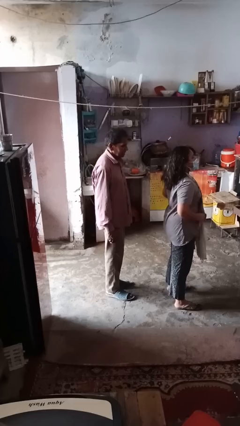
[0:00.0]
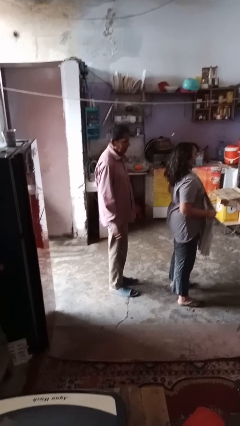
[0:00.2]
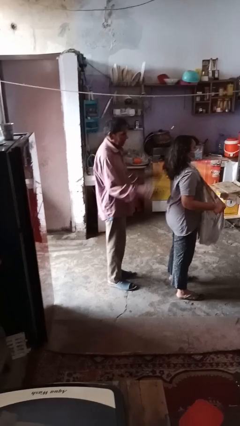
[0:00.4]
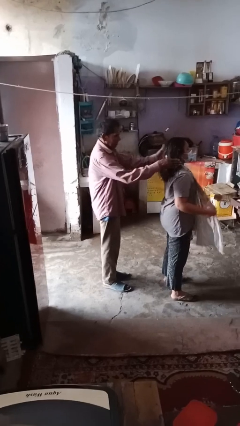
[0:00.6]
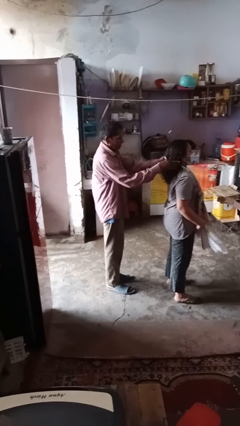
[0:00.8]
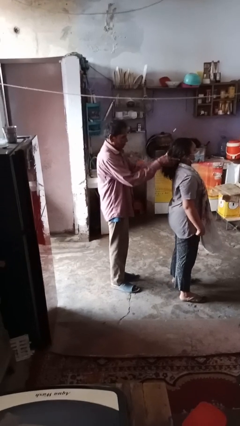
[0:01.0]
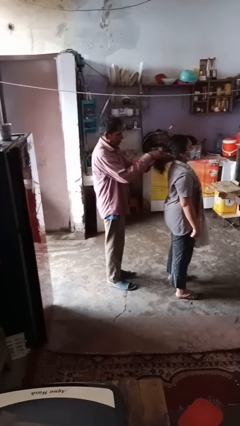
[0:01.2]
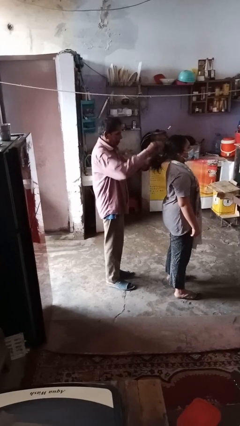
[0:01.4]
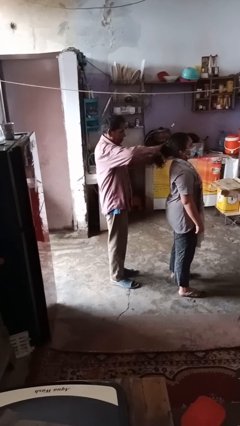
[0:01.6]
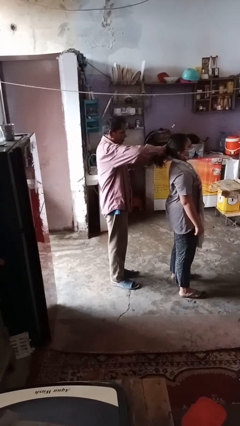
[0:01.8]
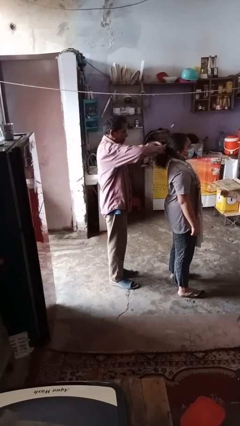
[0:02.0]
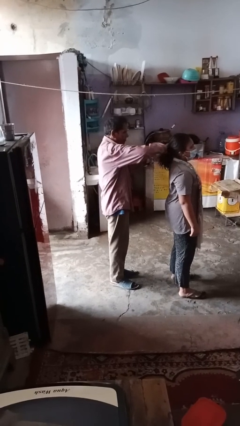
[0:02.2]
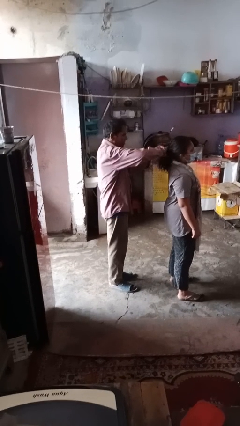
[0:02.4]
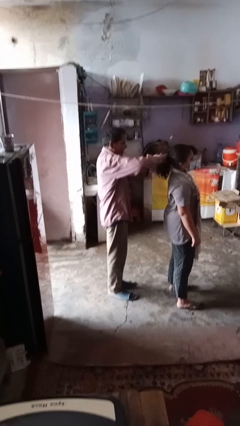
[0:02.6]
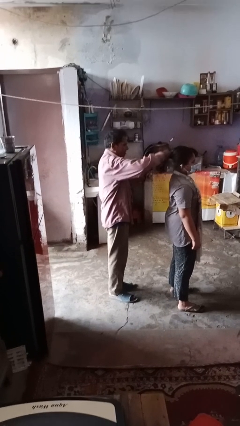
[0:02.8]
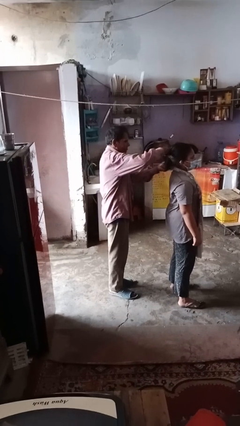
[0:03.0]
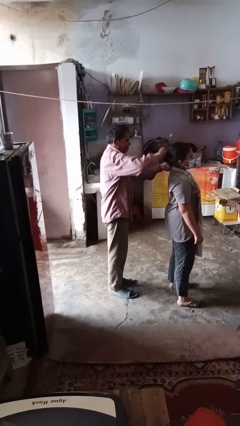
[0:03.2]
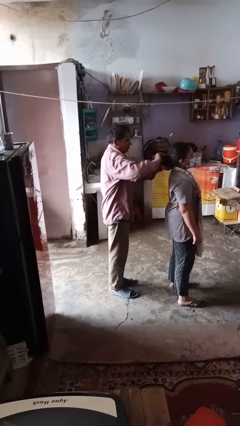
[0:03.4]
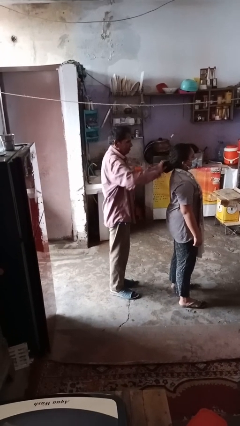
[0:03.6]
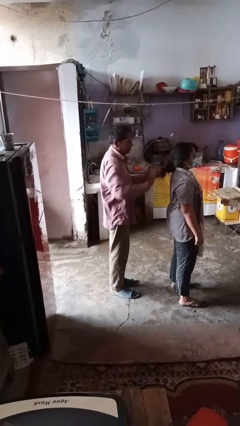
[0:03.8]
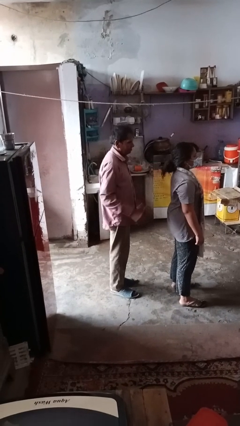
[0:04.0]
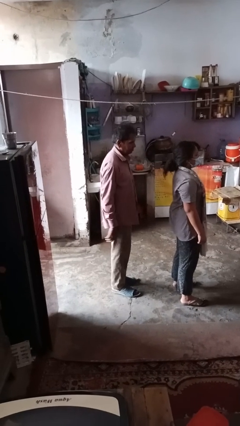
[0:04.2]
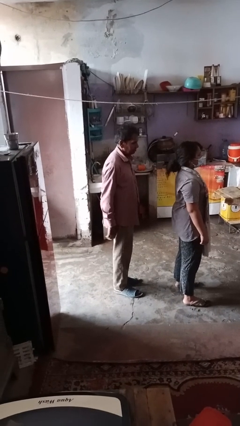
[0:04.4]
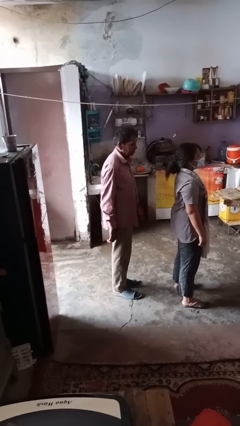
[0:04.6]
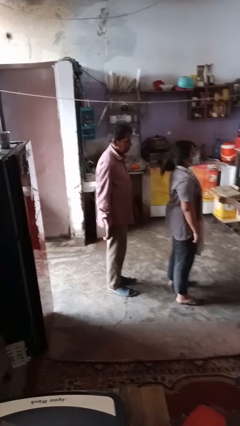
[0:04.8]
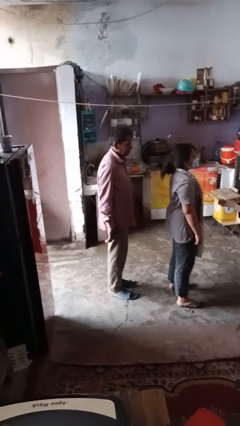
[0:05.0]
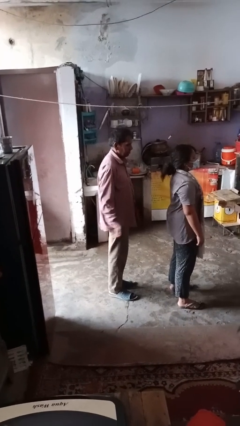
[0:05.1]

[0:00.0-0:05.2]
person braids hair of person

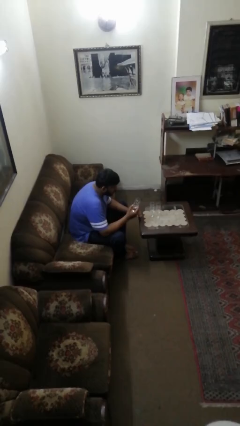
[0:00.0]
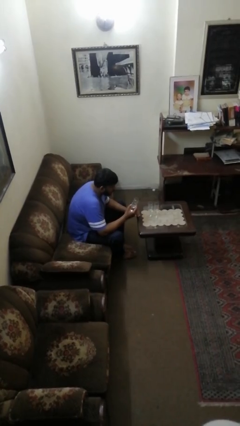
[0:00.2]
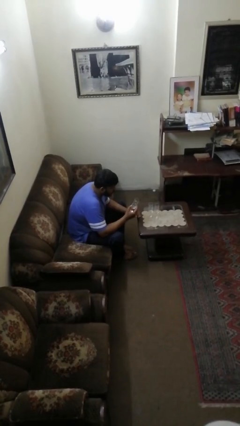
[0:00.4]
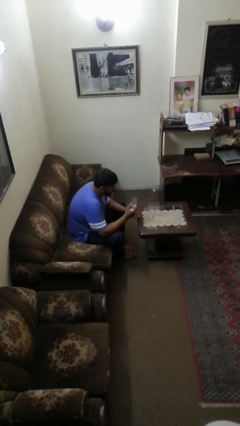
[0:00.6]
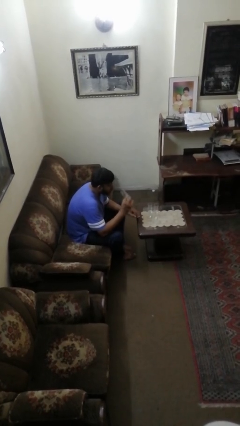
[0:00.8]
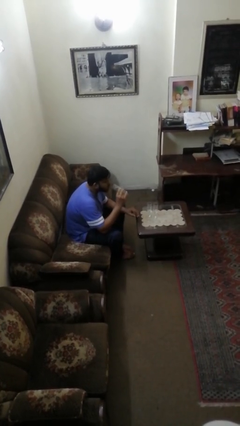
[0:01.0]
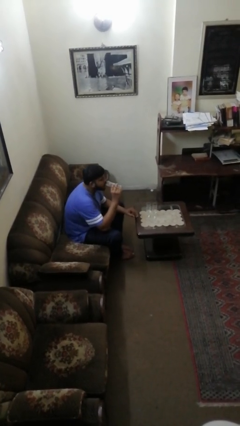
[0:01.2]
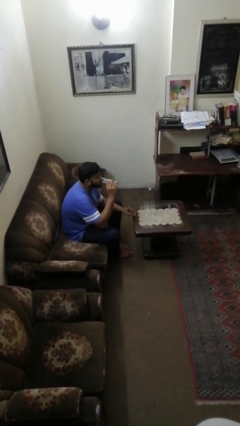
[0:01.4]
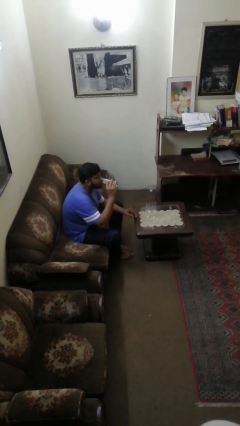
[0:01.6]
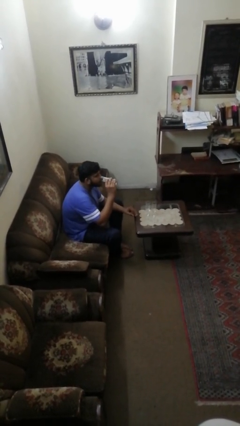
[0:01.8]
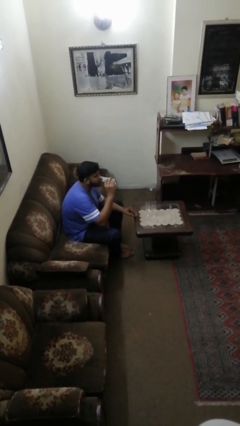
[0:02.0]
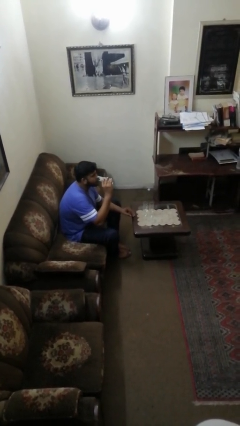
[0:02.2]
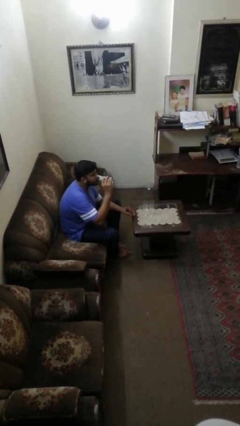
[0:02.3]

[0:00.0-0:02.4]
person drinks from shotglass

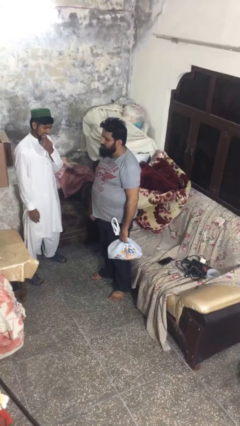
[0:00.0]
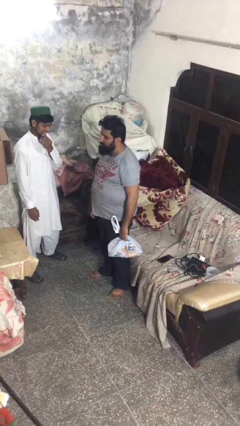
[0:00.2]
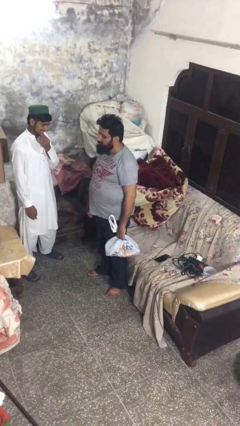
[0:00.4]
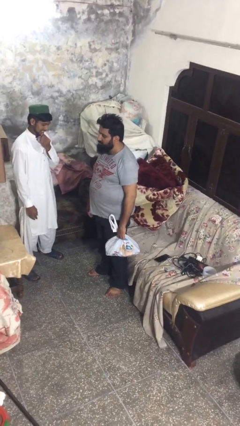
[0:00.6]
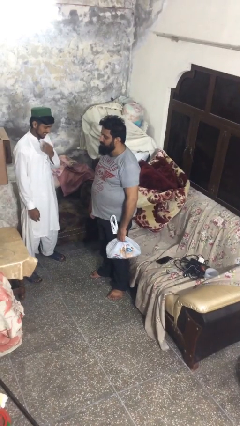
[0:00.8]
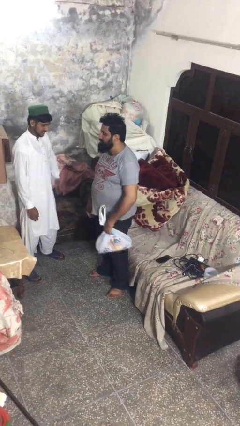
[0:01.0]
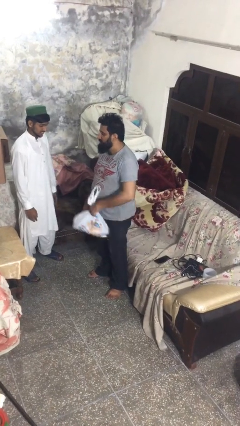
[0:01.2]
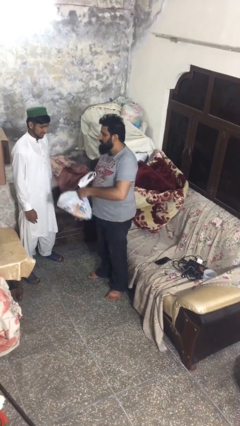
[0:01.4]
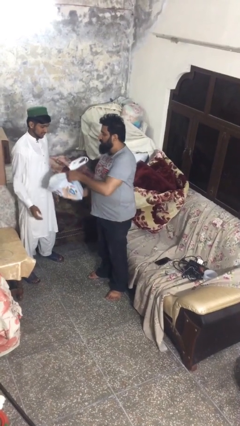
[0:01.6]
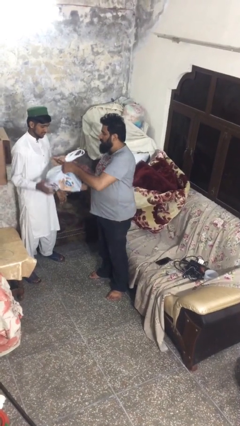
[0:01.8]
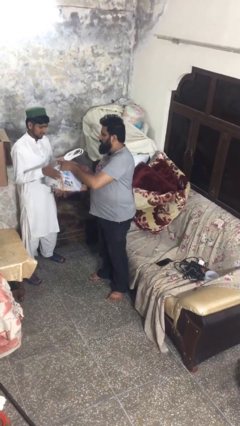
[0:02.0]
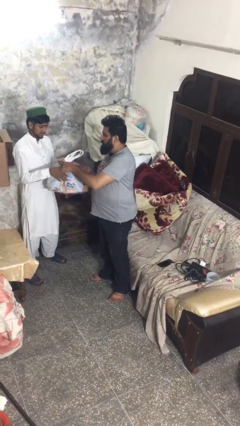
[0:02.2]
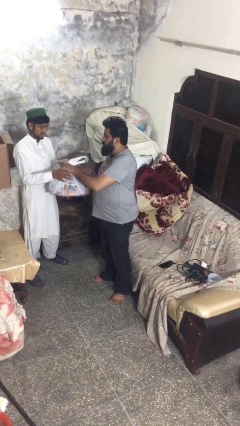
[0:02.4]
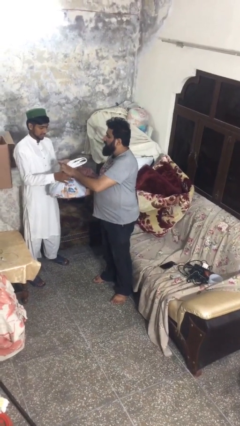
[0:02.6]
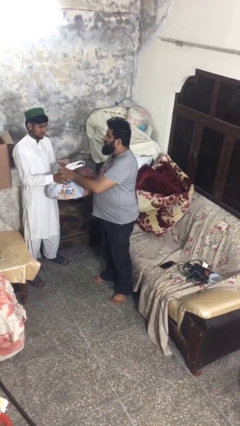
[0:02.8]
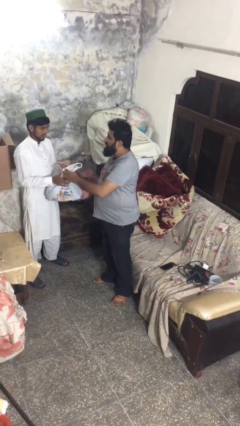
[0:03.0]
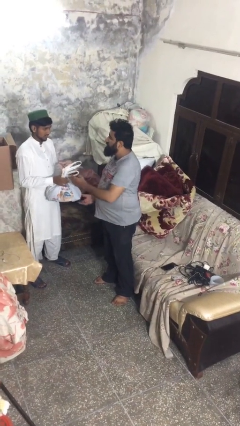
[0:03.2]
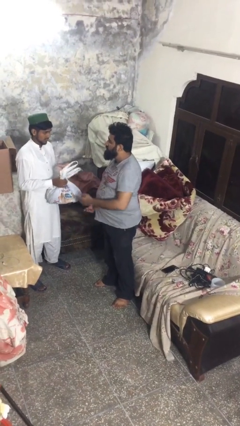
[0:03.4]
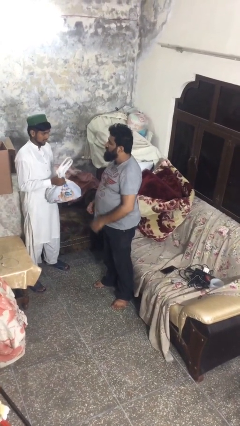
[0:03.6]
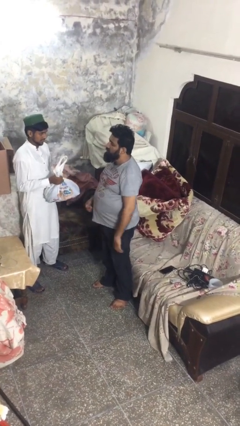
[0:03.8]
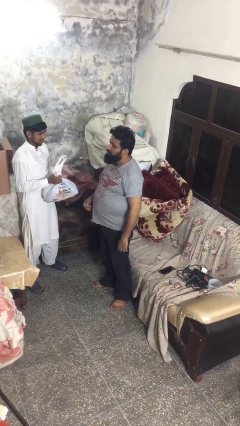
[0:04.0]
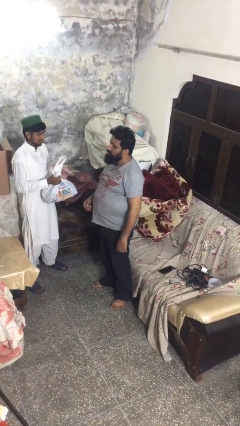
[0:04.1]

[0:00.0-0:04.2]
person transfers object to person

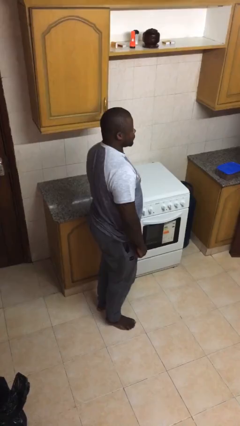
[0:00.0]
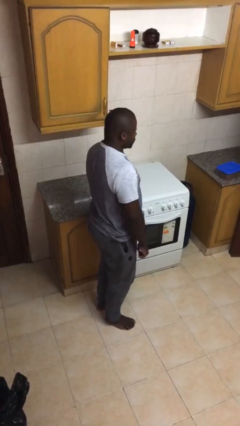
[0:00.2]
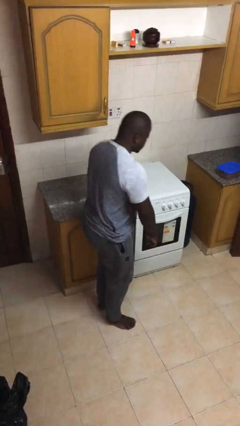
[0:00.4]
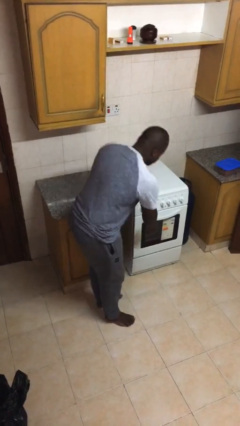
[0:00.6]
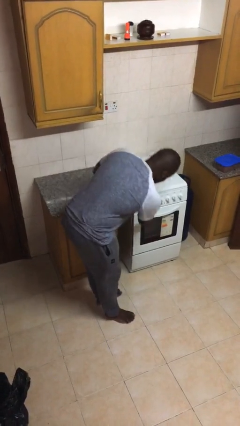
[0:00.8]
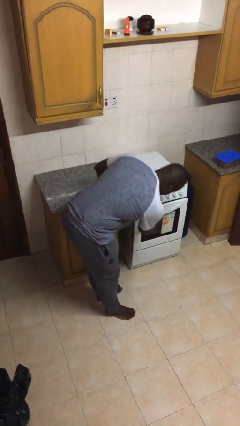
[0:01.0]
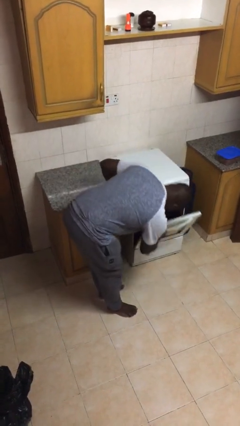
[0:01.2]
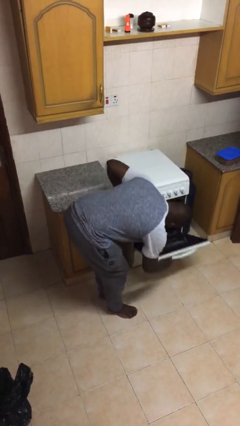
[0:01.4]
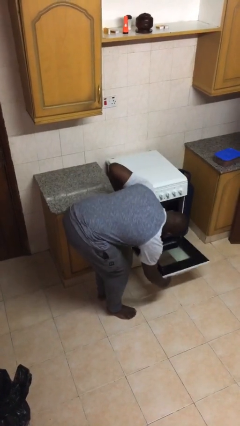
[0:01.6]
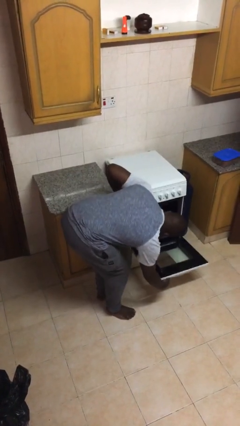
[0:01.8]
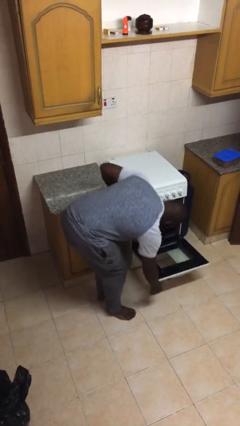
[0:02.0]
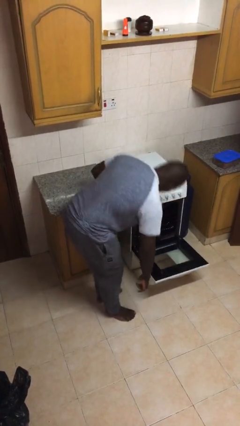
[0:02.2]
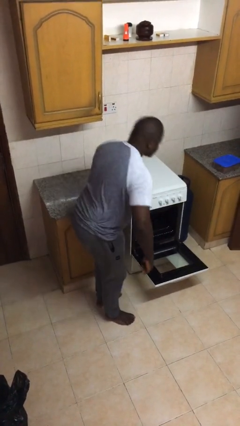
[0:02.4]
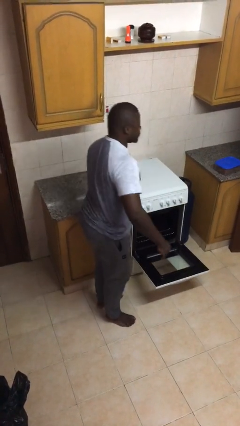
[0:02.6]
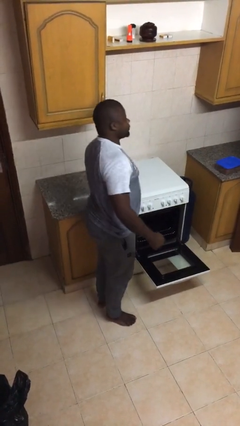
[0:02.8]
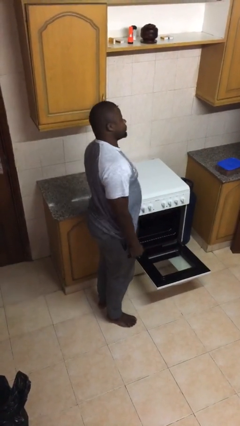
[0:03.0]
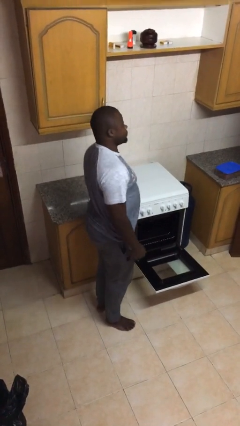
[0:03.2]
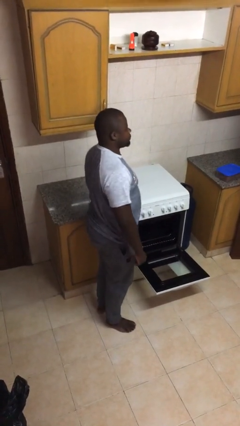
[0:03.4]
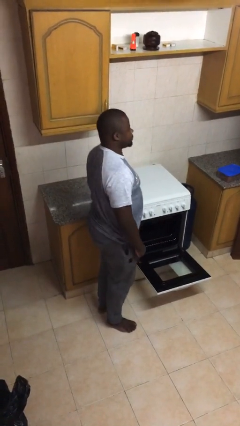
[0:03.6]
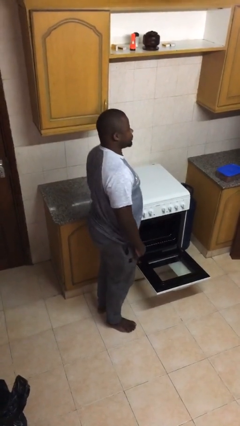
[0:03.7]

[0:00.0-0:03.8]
person opens oven door

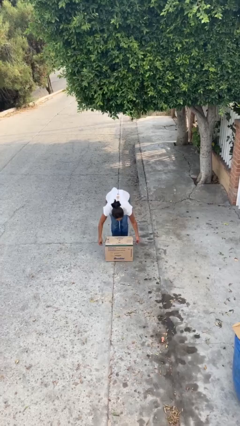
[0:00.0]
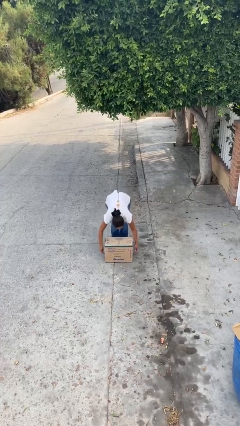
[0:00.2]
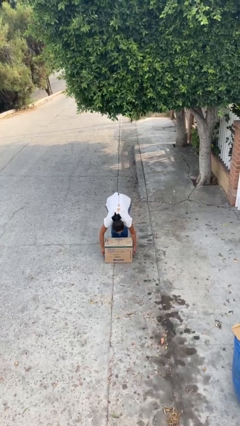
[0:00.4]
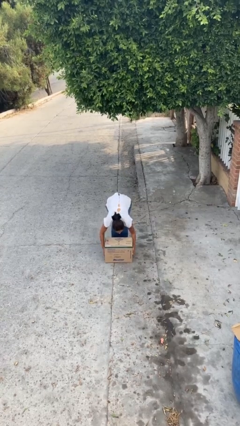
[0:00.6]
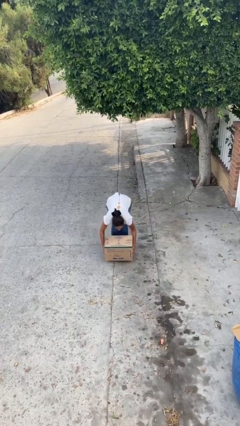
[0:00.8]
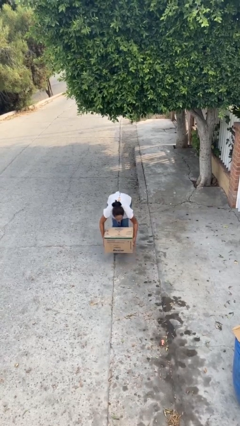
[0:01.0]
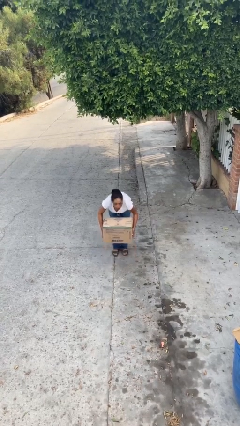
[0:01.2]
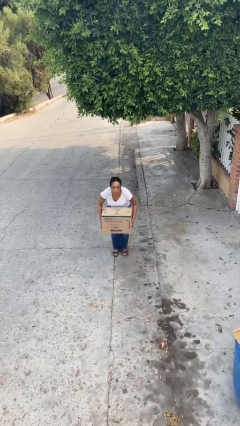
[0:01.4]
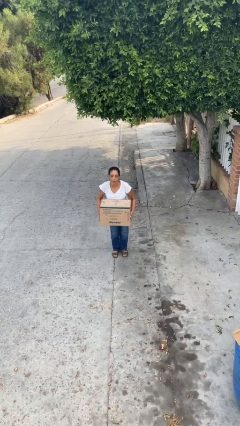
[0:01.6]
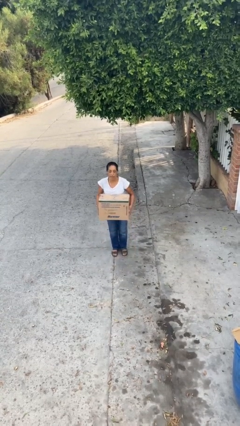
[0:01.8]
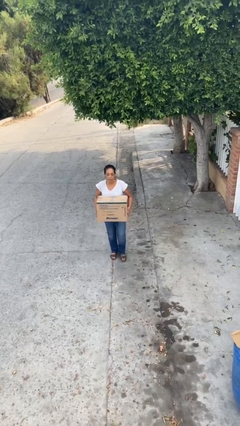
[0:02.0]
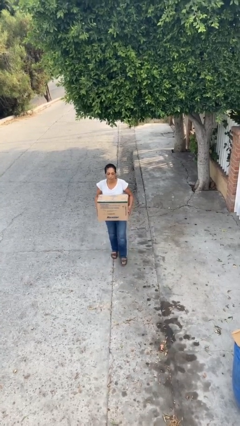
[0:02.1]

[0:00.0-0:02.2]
person picks up object from floor
